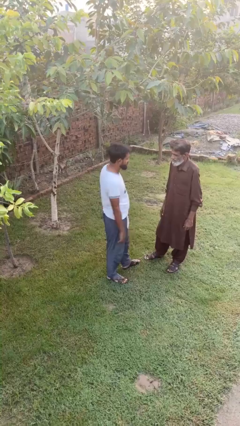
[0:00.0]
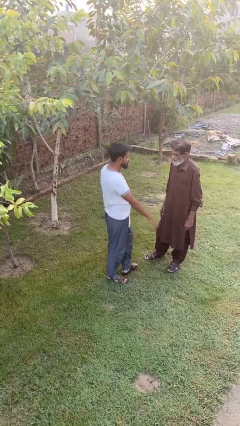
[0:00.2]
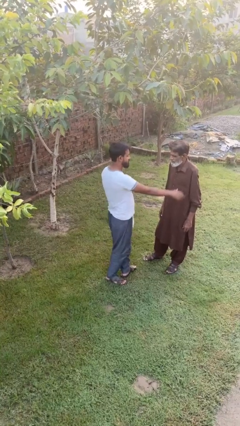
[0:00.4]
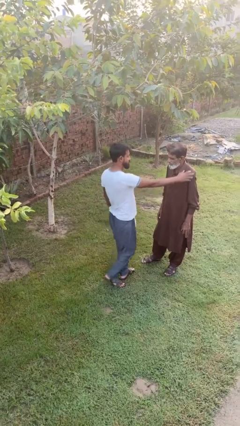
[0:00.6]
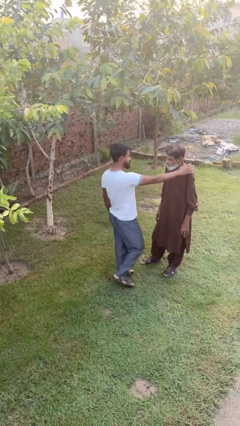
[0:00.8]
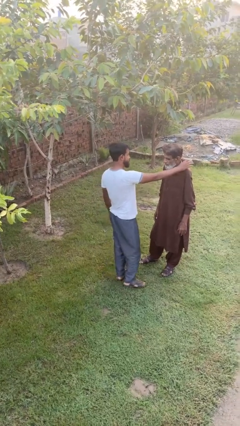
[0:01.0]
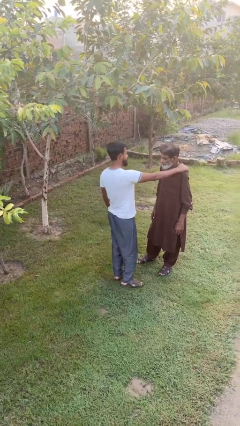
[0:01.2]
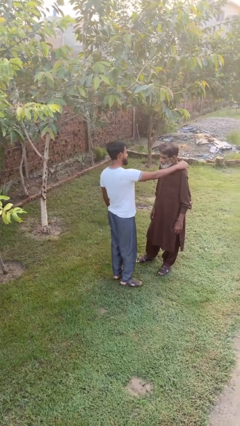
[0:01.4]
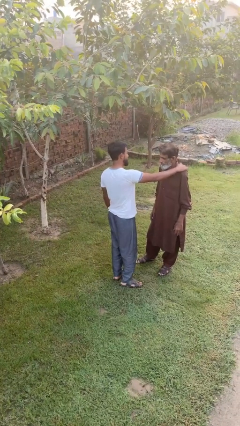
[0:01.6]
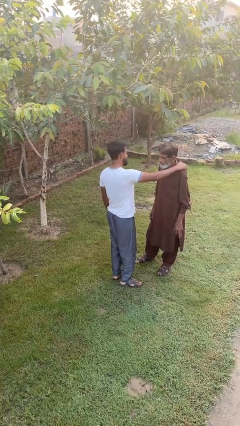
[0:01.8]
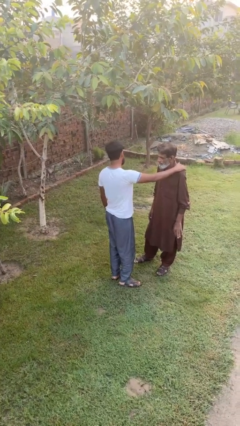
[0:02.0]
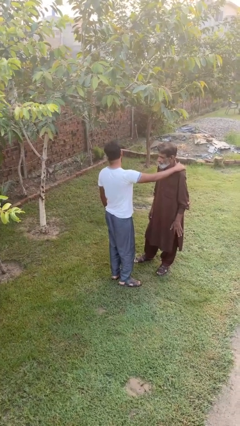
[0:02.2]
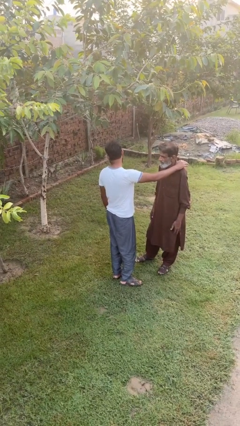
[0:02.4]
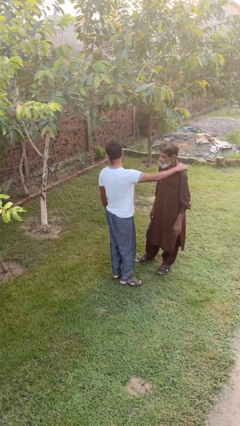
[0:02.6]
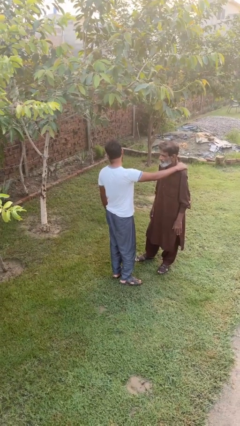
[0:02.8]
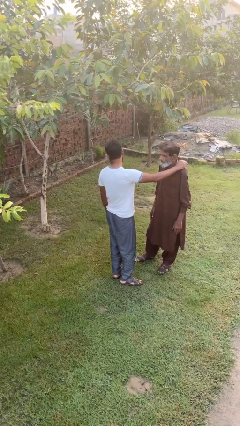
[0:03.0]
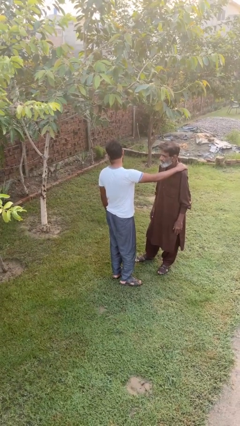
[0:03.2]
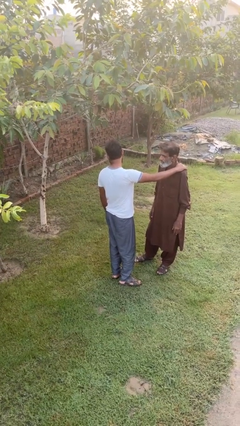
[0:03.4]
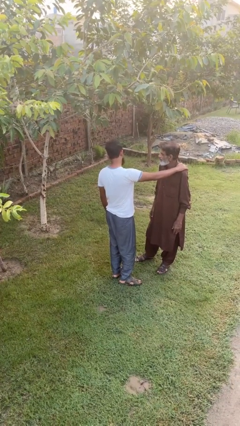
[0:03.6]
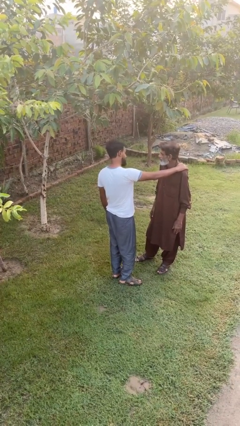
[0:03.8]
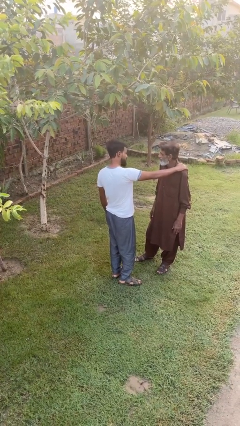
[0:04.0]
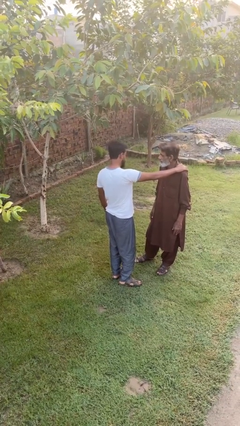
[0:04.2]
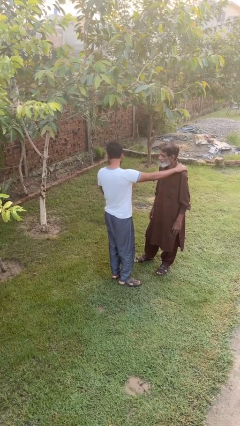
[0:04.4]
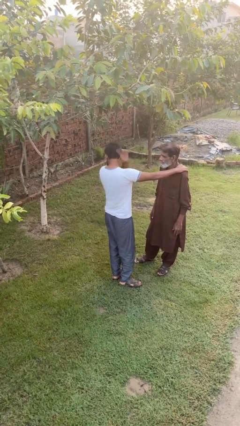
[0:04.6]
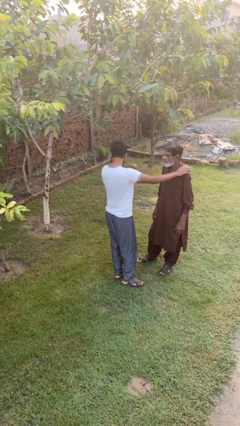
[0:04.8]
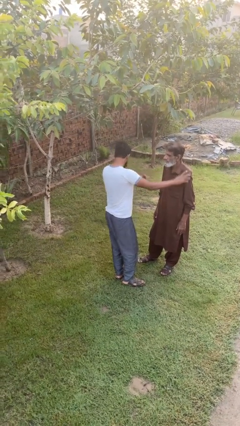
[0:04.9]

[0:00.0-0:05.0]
person pounds shoulders of person

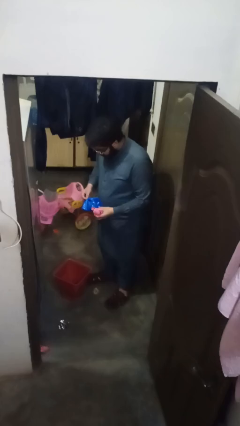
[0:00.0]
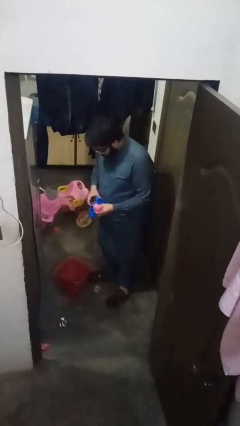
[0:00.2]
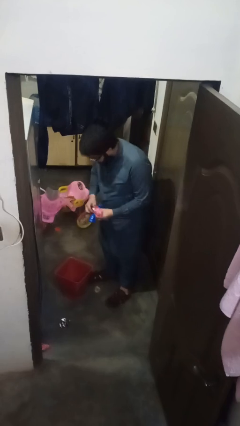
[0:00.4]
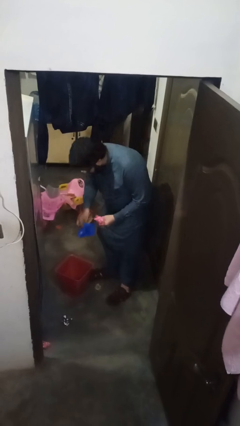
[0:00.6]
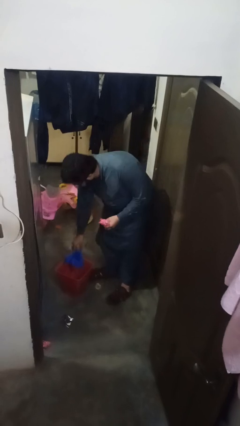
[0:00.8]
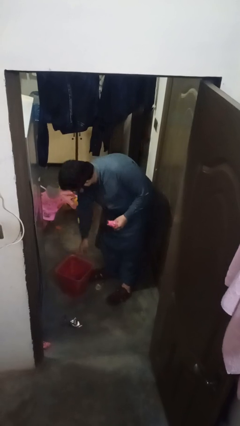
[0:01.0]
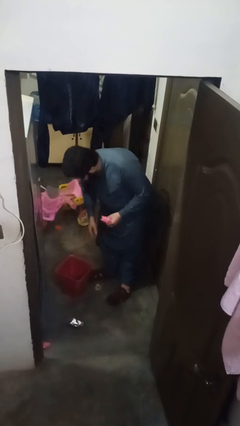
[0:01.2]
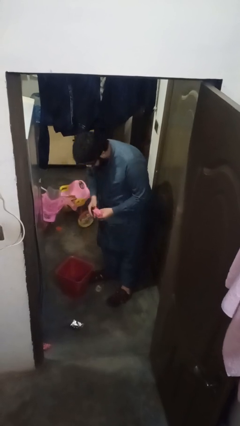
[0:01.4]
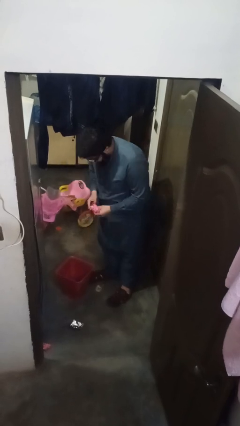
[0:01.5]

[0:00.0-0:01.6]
person discards trash

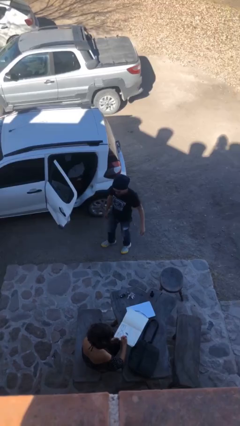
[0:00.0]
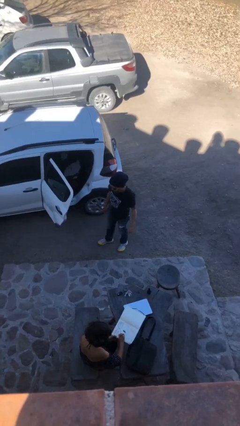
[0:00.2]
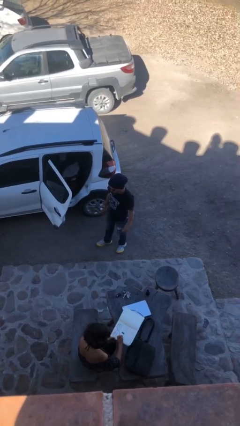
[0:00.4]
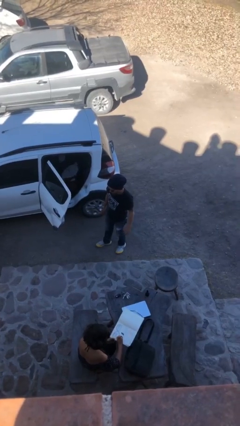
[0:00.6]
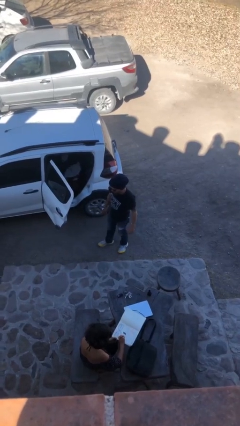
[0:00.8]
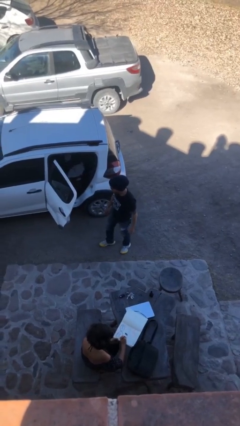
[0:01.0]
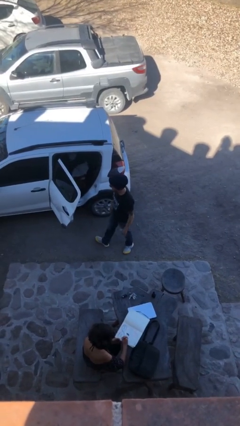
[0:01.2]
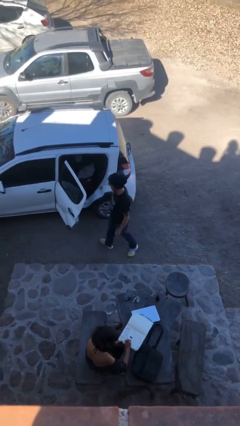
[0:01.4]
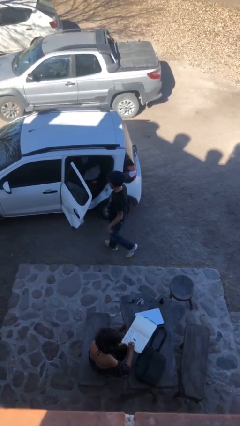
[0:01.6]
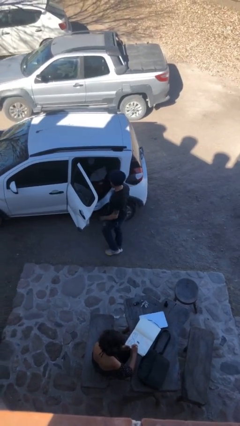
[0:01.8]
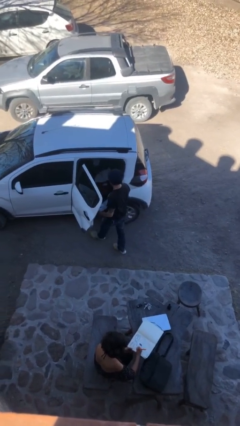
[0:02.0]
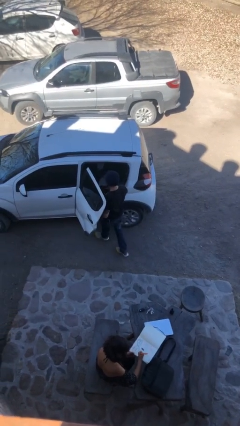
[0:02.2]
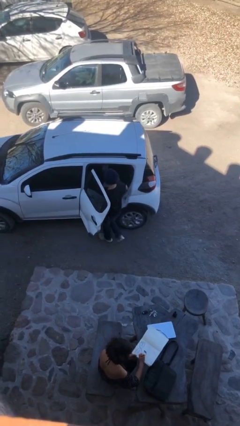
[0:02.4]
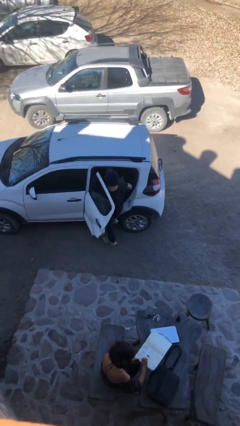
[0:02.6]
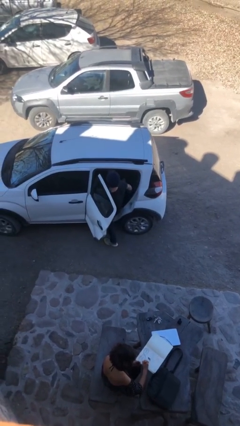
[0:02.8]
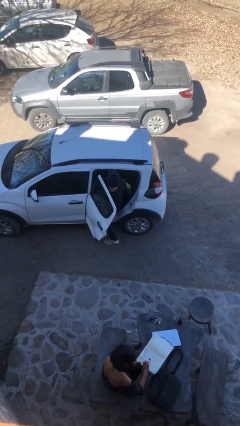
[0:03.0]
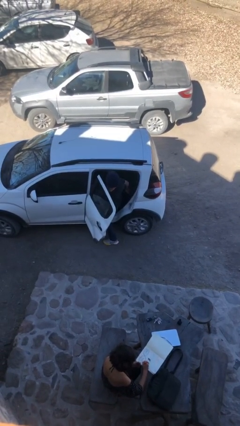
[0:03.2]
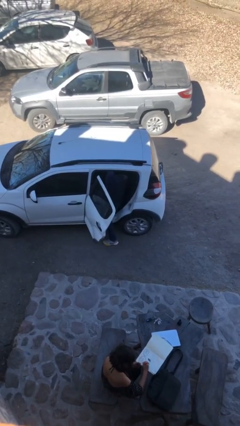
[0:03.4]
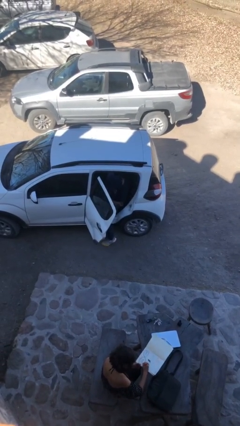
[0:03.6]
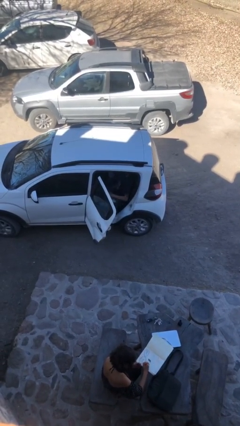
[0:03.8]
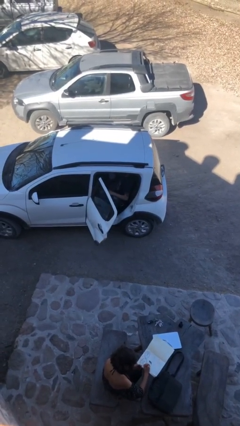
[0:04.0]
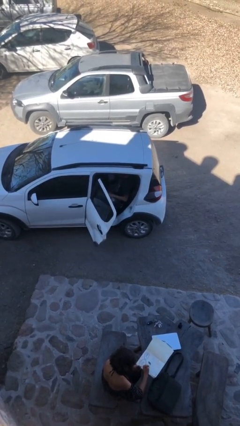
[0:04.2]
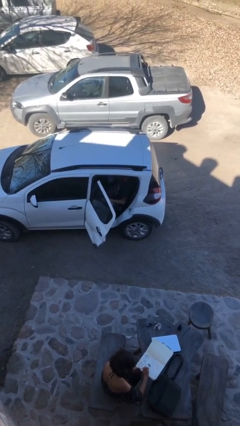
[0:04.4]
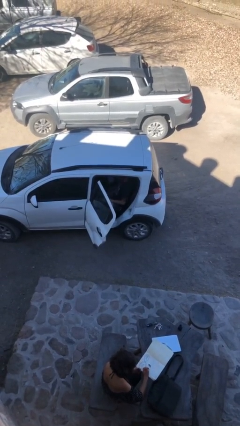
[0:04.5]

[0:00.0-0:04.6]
person enters car

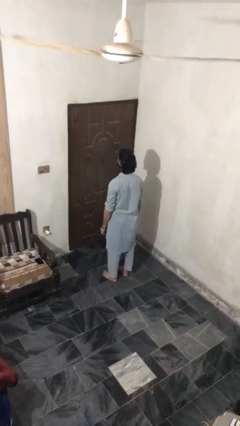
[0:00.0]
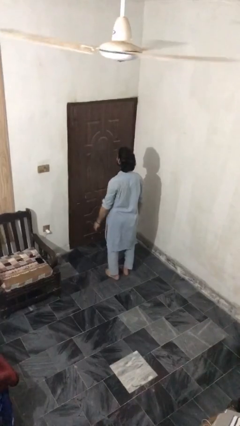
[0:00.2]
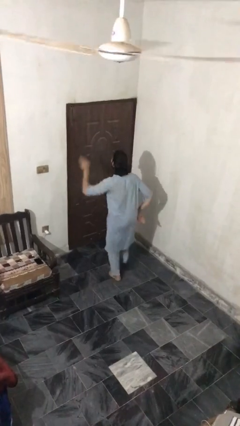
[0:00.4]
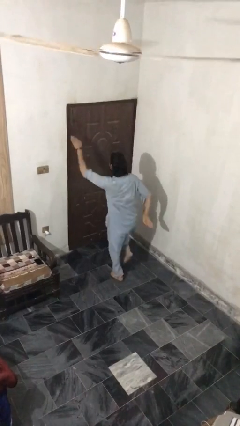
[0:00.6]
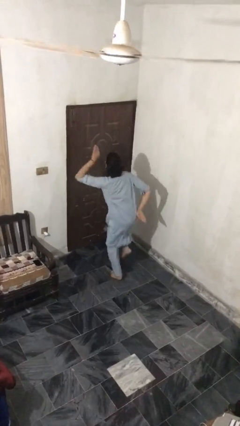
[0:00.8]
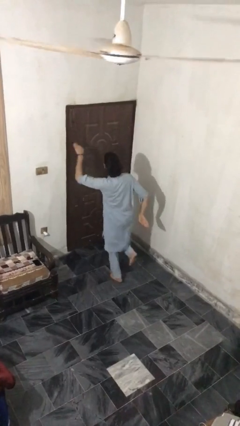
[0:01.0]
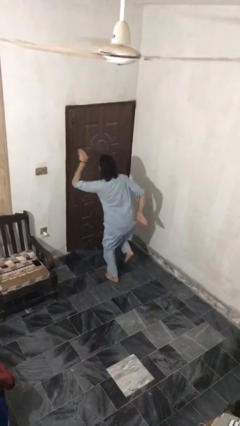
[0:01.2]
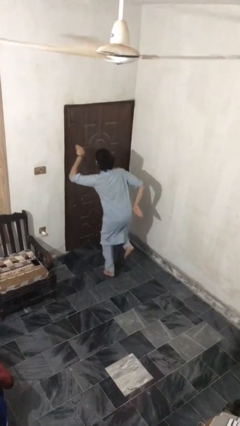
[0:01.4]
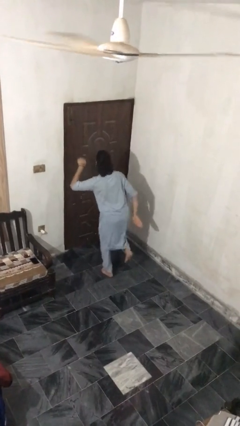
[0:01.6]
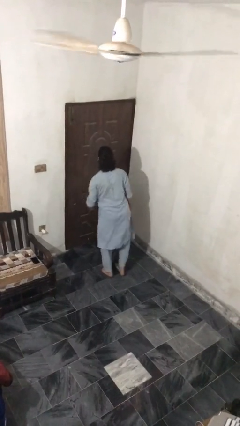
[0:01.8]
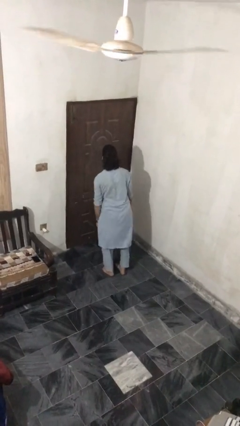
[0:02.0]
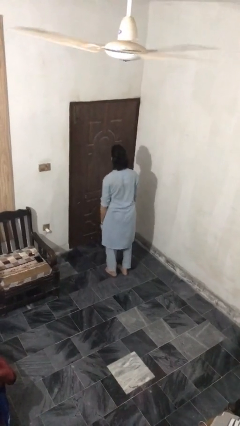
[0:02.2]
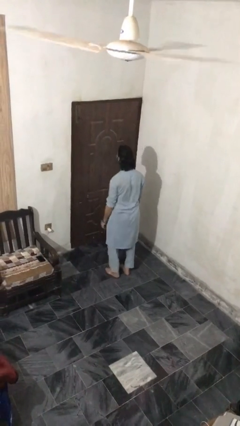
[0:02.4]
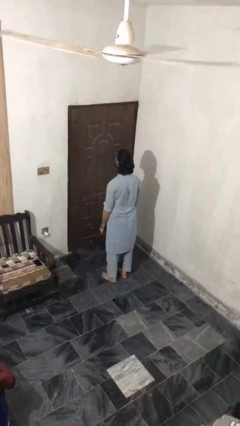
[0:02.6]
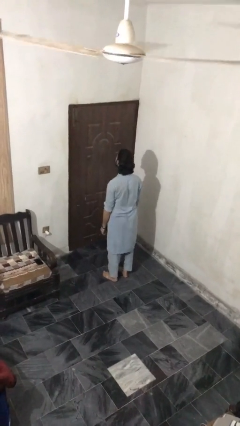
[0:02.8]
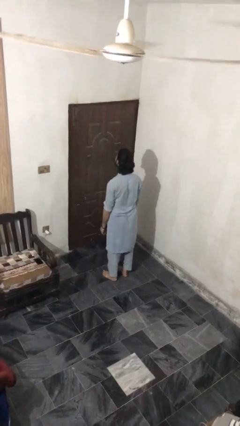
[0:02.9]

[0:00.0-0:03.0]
person dances in place

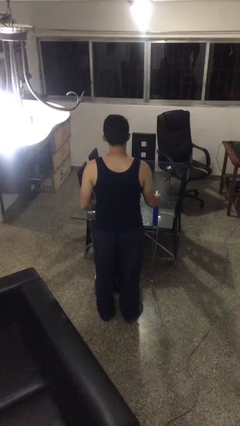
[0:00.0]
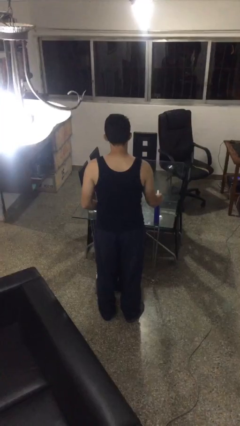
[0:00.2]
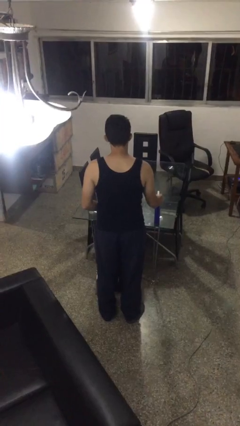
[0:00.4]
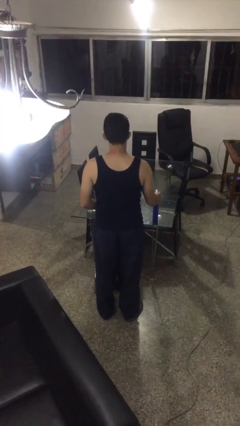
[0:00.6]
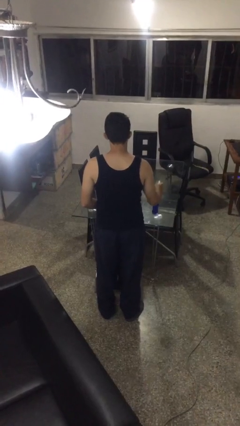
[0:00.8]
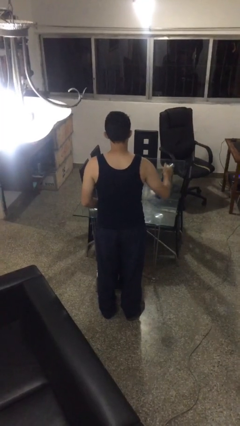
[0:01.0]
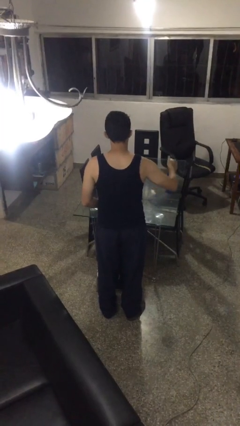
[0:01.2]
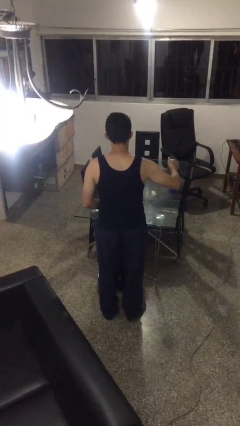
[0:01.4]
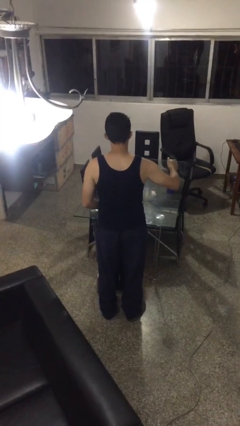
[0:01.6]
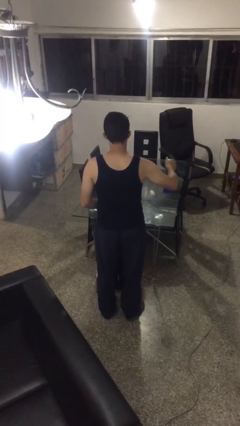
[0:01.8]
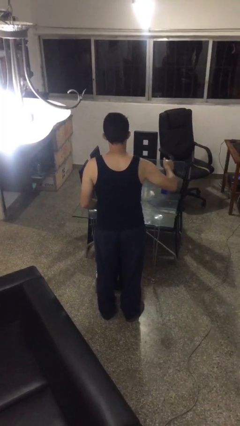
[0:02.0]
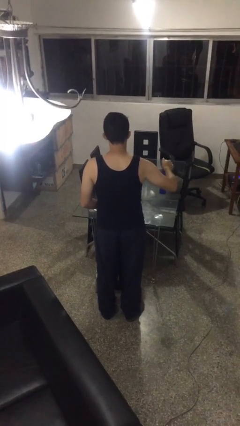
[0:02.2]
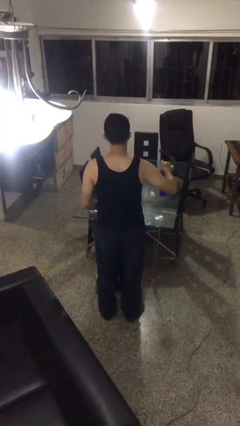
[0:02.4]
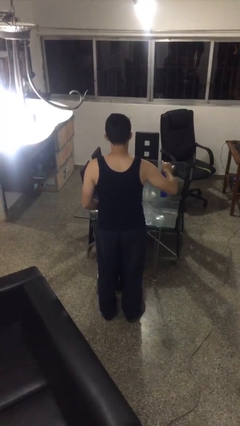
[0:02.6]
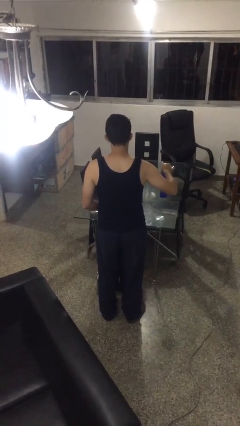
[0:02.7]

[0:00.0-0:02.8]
person sprays from bottle

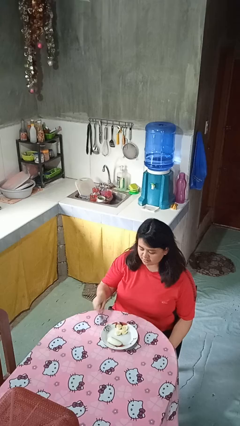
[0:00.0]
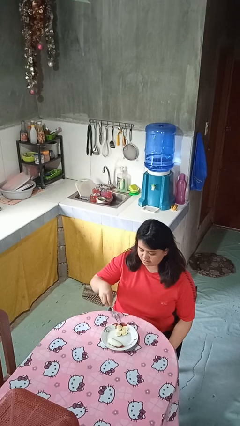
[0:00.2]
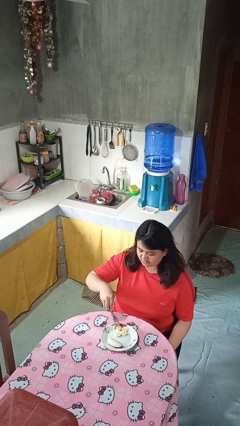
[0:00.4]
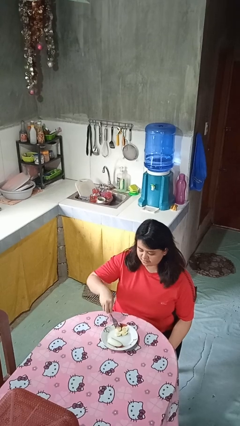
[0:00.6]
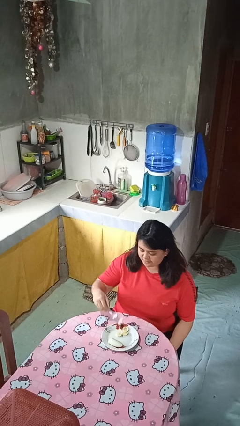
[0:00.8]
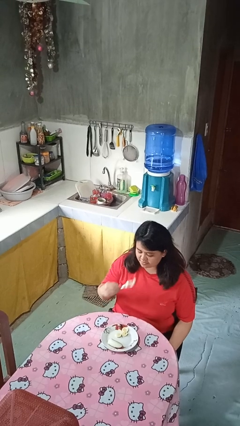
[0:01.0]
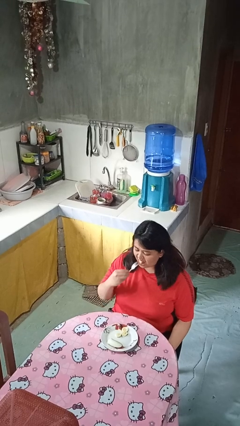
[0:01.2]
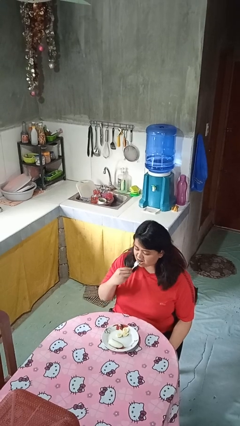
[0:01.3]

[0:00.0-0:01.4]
person eats with utensil
